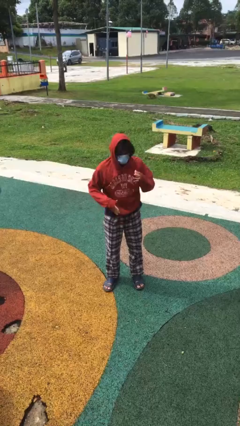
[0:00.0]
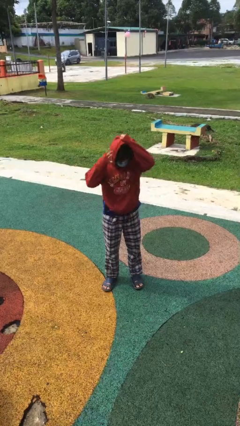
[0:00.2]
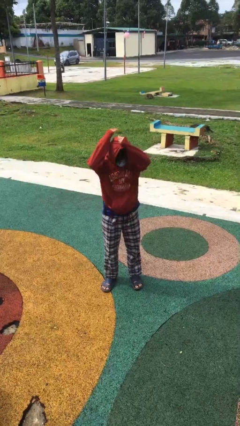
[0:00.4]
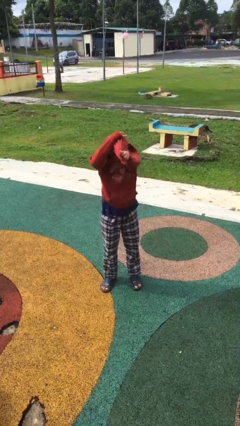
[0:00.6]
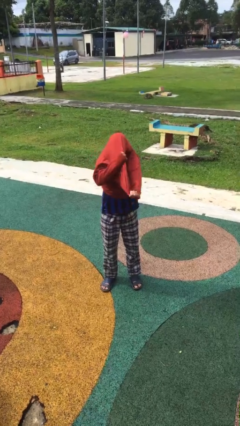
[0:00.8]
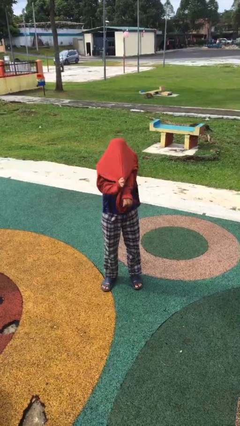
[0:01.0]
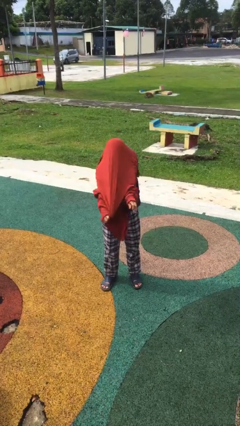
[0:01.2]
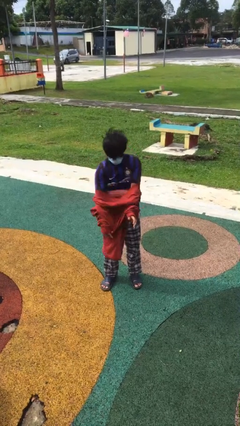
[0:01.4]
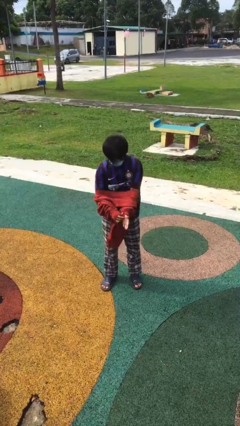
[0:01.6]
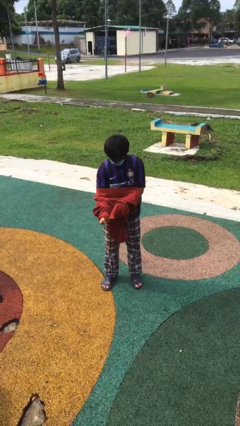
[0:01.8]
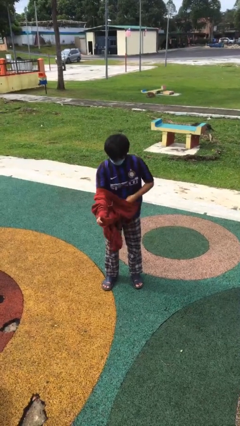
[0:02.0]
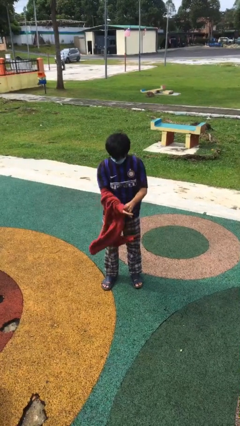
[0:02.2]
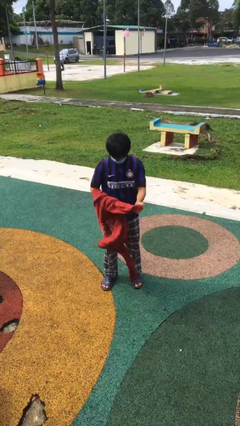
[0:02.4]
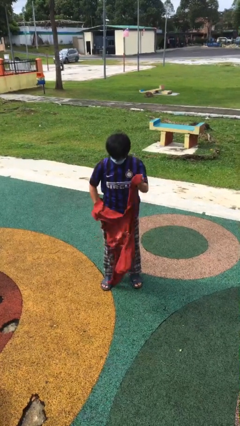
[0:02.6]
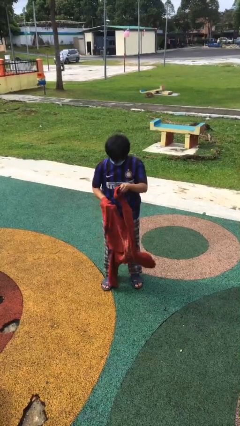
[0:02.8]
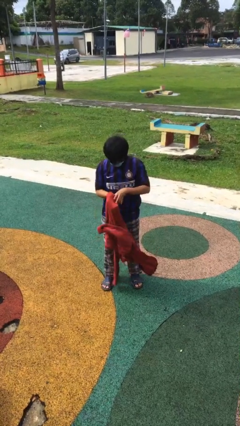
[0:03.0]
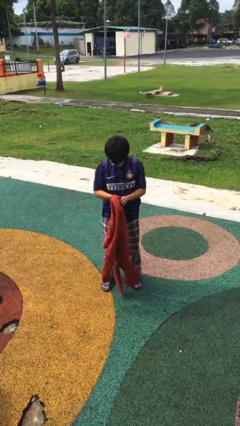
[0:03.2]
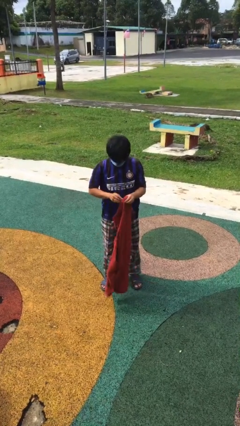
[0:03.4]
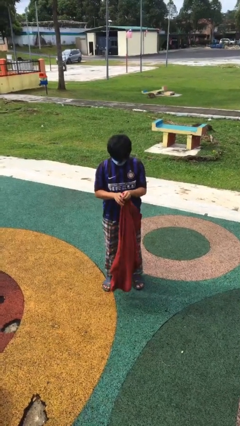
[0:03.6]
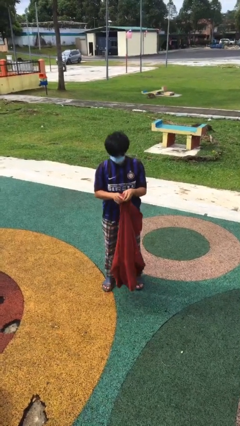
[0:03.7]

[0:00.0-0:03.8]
person takes off hoodie

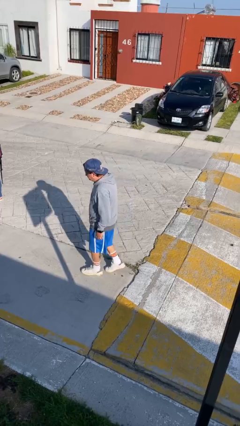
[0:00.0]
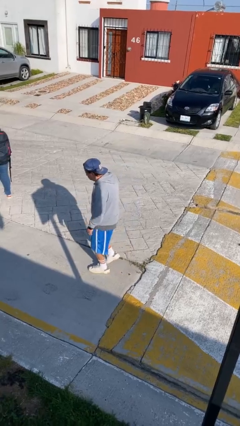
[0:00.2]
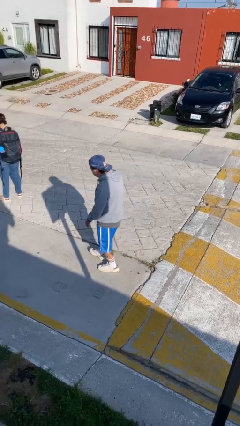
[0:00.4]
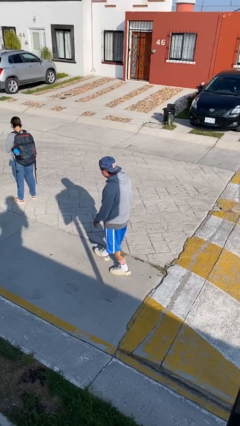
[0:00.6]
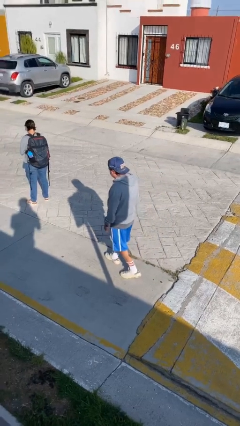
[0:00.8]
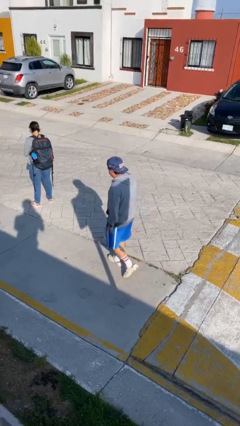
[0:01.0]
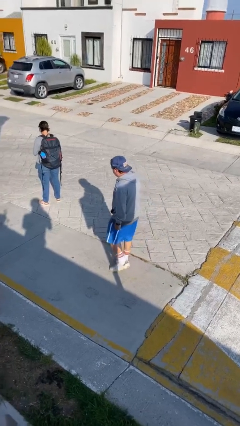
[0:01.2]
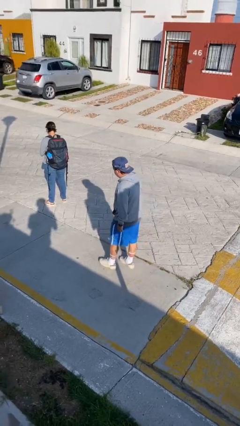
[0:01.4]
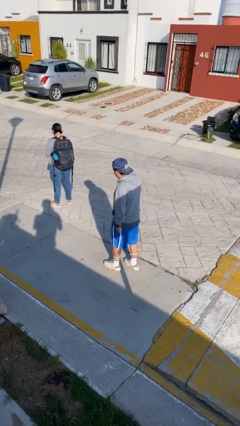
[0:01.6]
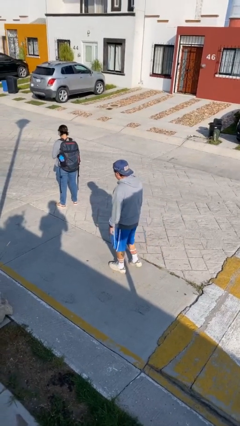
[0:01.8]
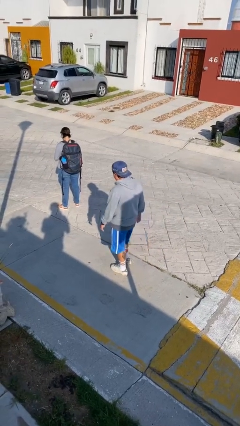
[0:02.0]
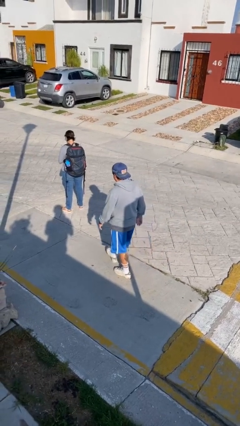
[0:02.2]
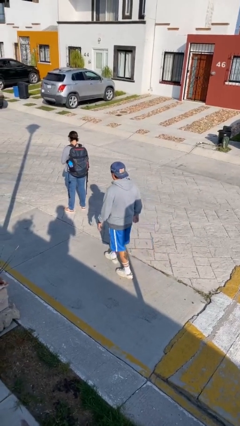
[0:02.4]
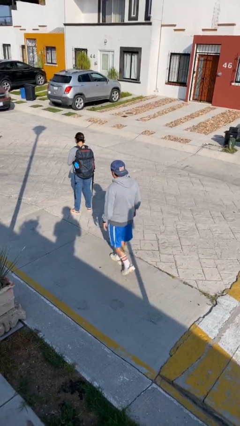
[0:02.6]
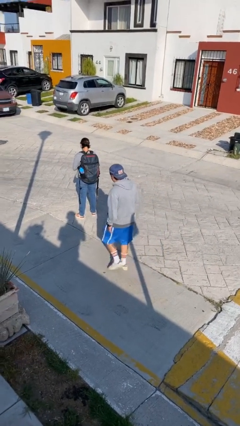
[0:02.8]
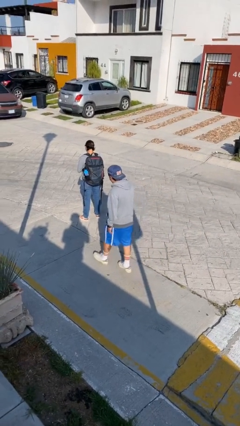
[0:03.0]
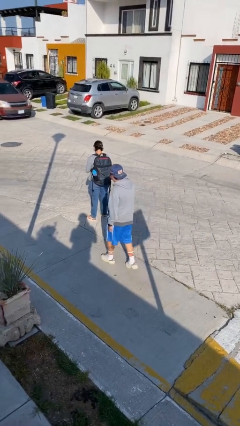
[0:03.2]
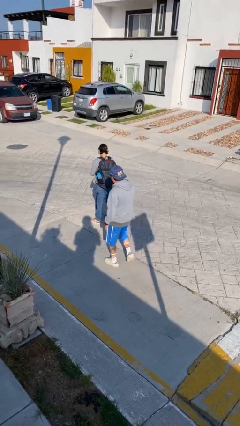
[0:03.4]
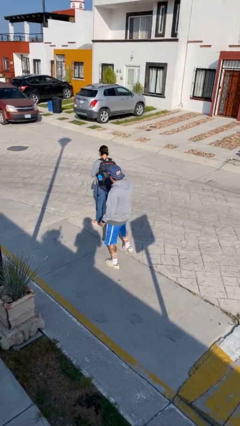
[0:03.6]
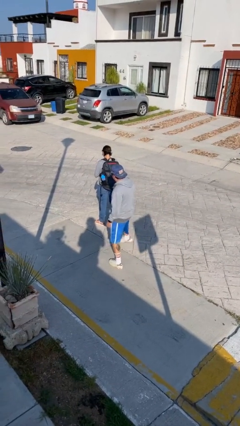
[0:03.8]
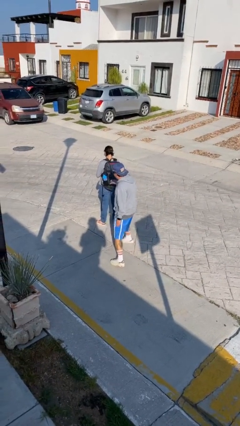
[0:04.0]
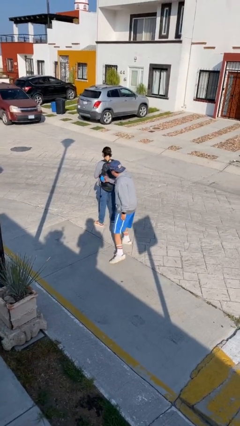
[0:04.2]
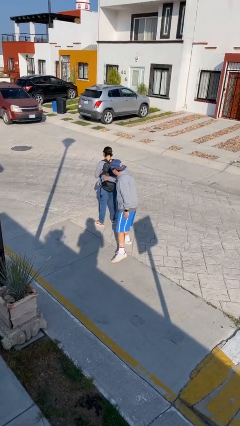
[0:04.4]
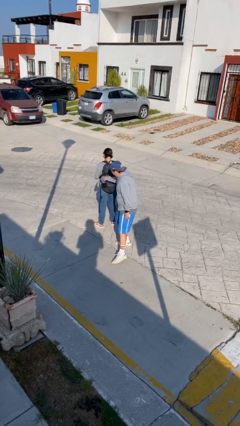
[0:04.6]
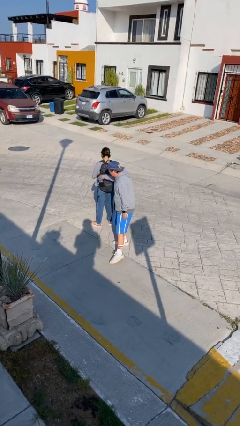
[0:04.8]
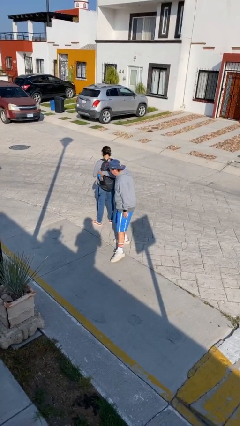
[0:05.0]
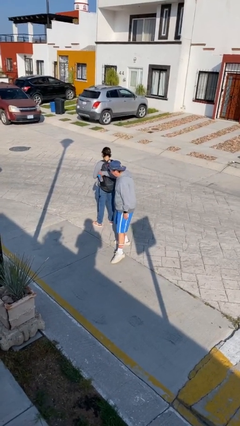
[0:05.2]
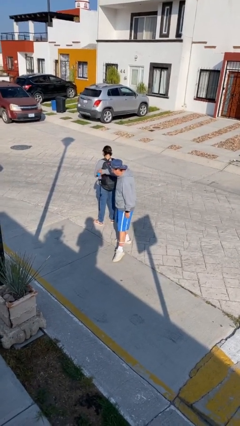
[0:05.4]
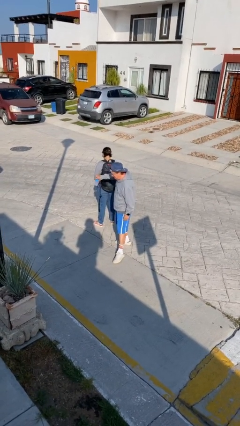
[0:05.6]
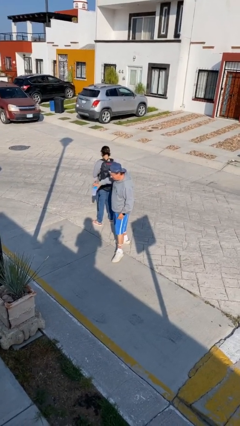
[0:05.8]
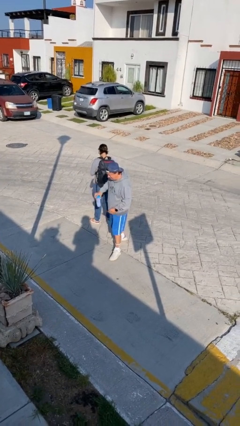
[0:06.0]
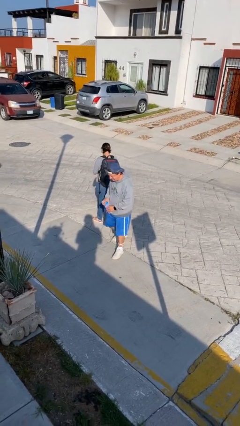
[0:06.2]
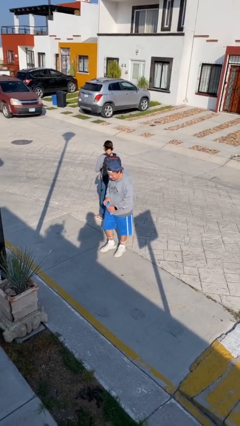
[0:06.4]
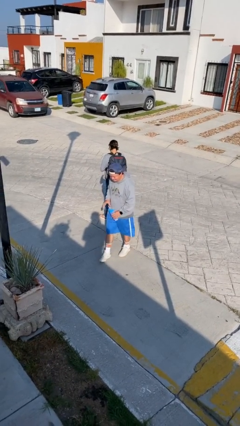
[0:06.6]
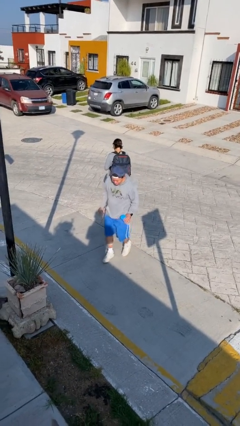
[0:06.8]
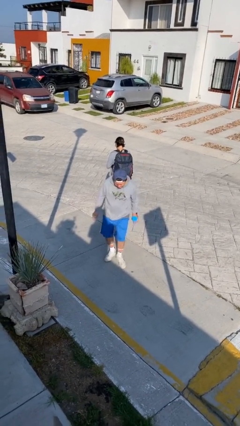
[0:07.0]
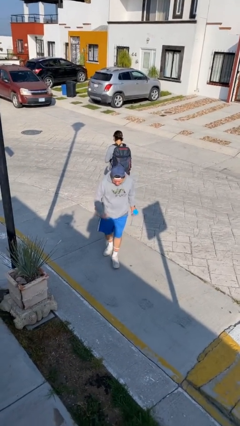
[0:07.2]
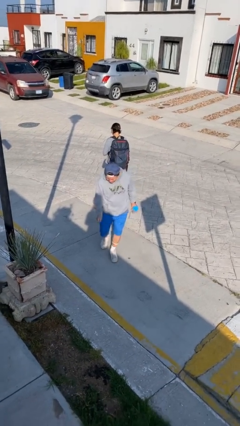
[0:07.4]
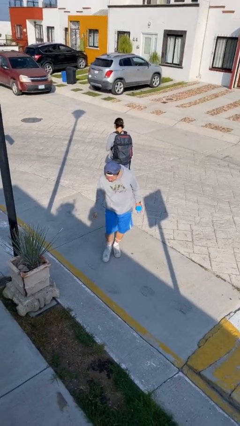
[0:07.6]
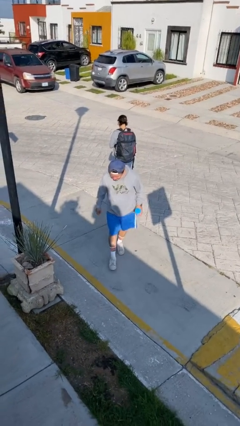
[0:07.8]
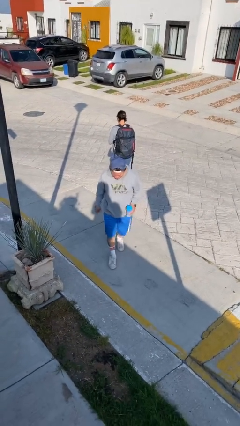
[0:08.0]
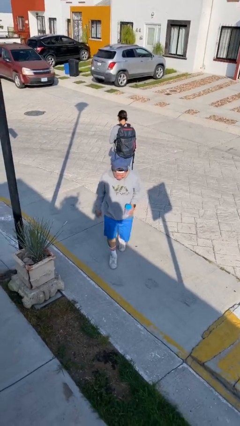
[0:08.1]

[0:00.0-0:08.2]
person steals object from person

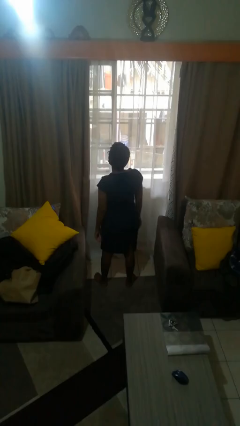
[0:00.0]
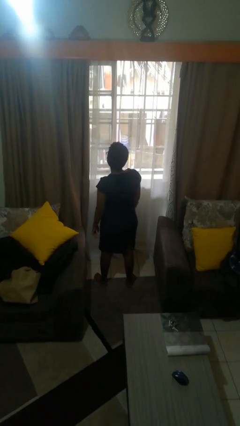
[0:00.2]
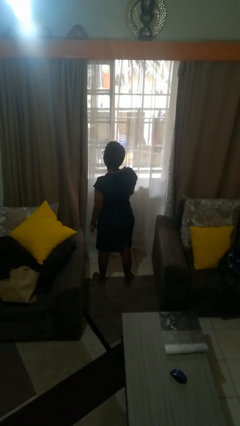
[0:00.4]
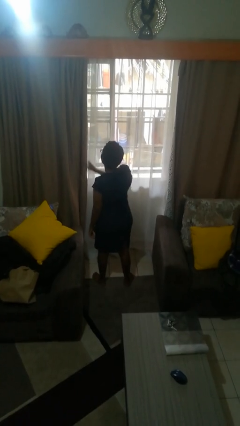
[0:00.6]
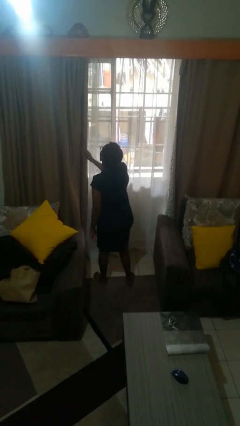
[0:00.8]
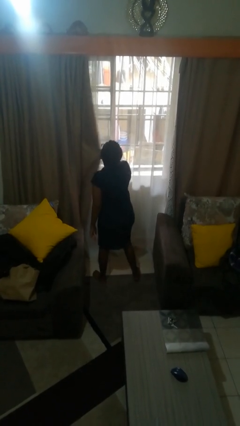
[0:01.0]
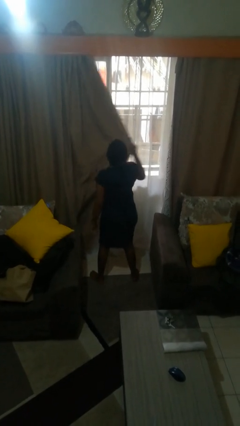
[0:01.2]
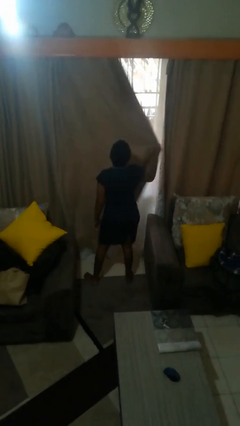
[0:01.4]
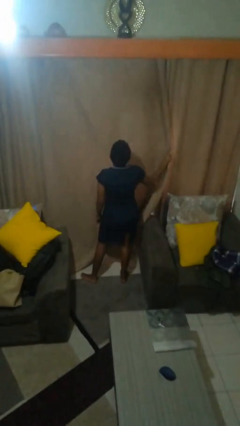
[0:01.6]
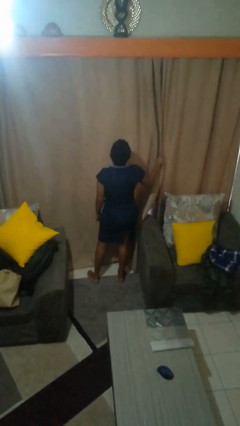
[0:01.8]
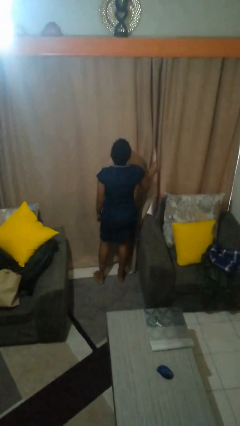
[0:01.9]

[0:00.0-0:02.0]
person closes curtains

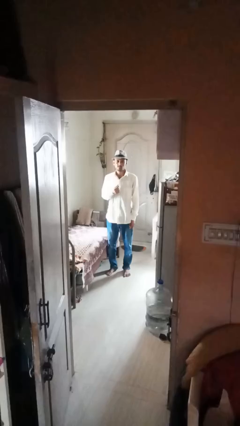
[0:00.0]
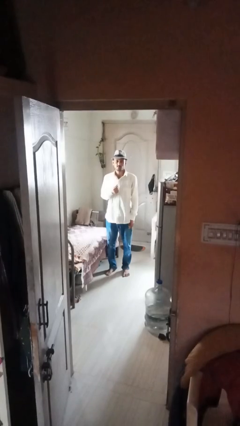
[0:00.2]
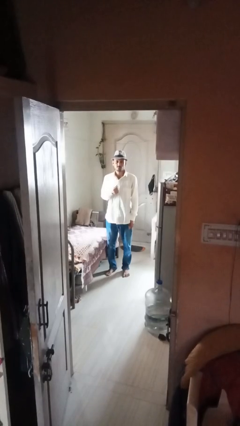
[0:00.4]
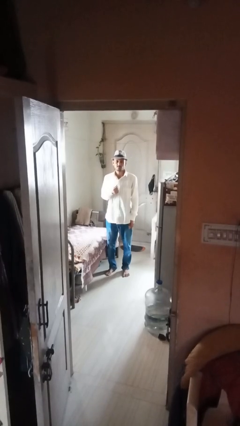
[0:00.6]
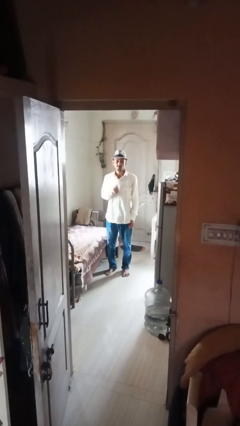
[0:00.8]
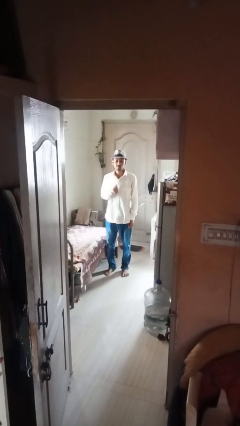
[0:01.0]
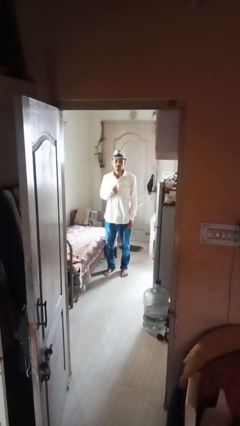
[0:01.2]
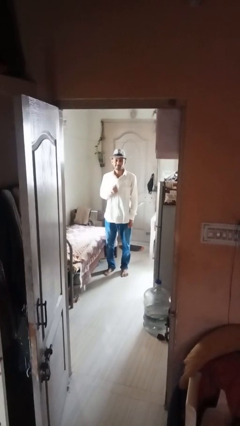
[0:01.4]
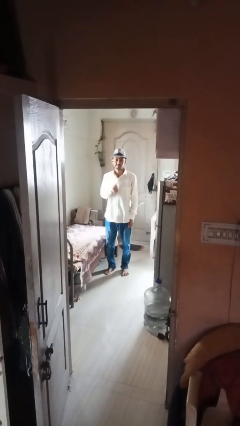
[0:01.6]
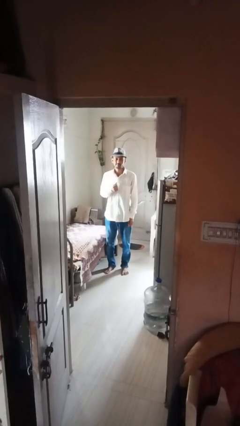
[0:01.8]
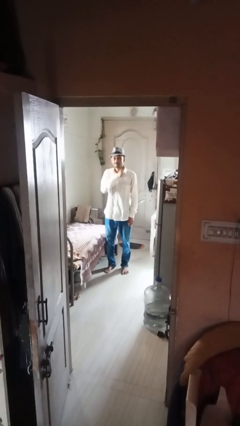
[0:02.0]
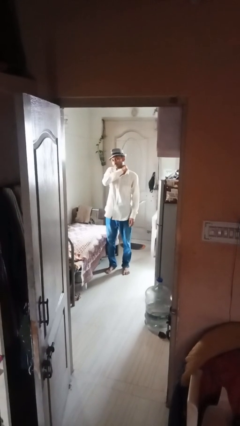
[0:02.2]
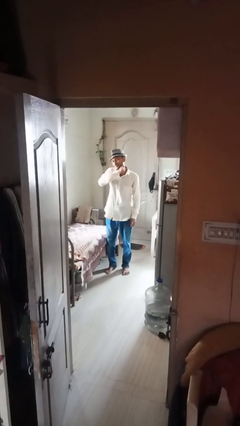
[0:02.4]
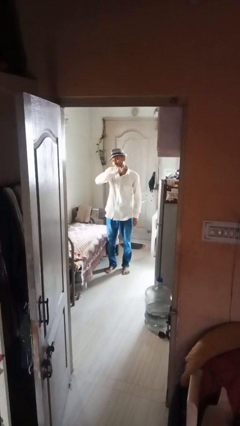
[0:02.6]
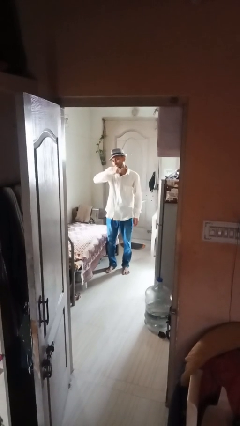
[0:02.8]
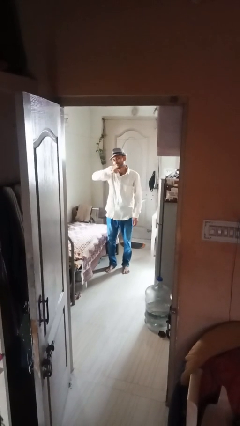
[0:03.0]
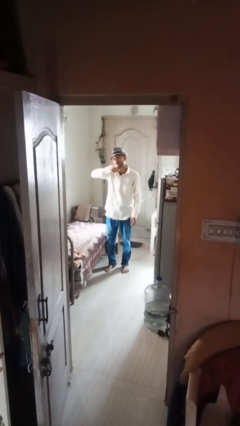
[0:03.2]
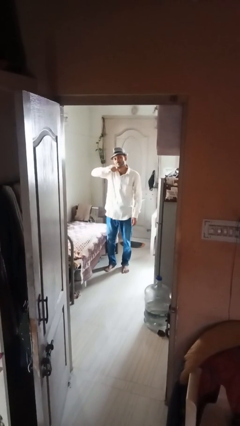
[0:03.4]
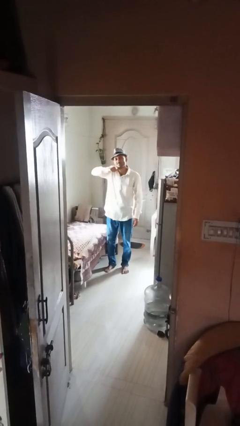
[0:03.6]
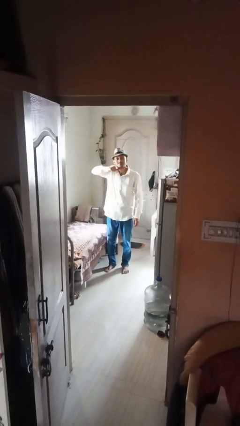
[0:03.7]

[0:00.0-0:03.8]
person gestures cut
